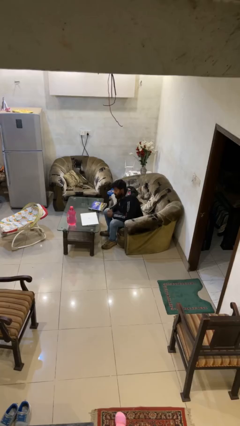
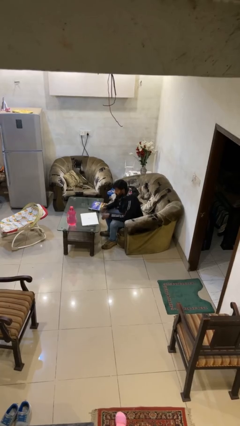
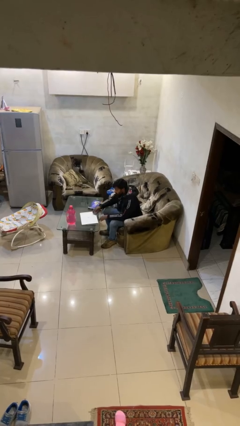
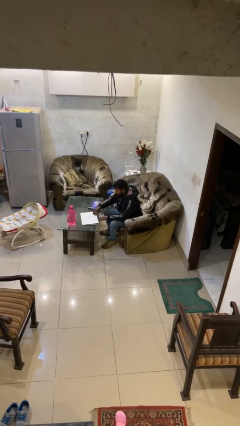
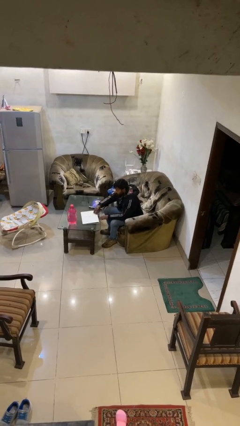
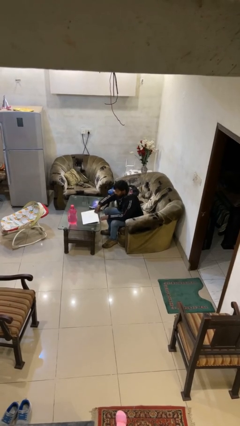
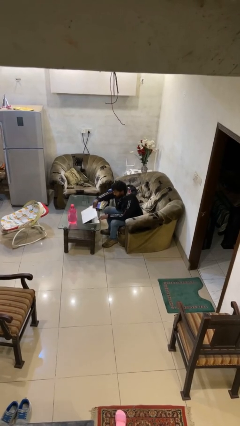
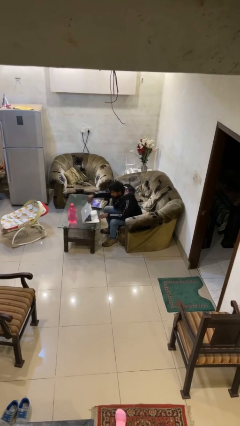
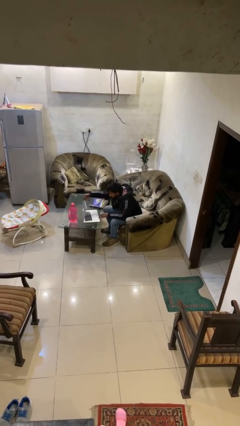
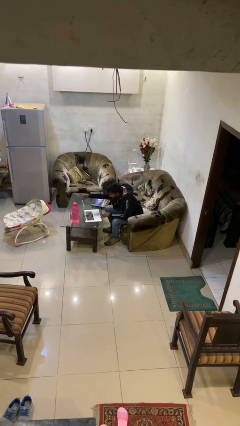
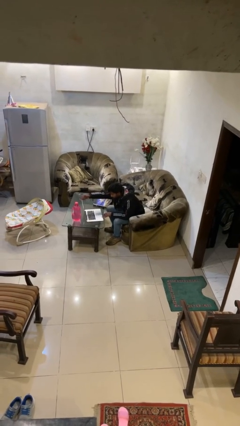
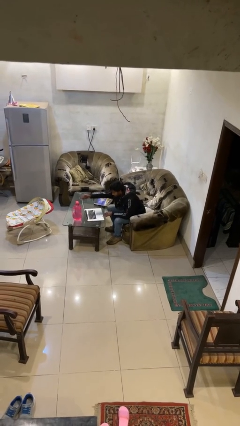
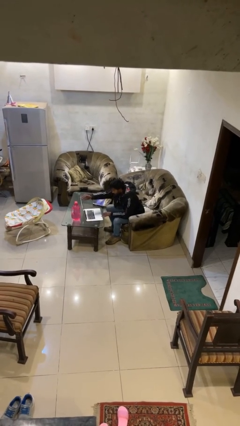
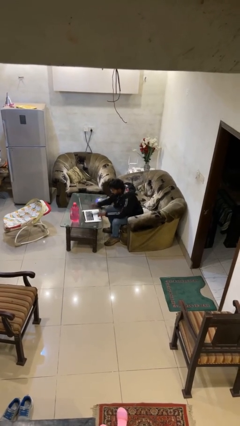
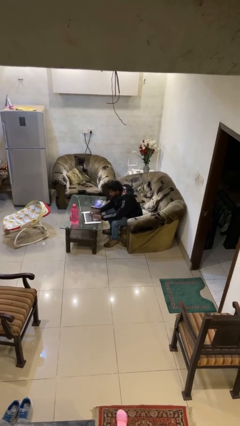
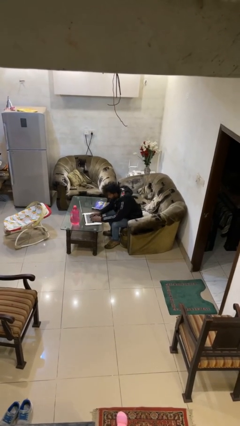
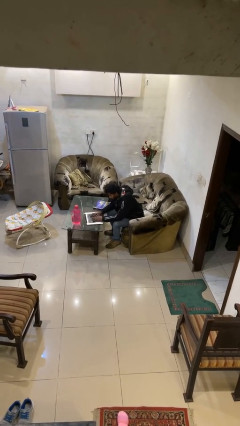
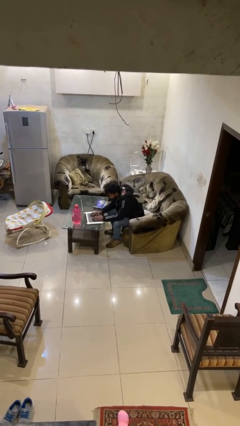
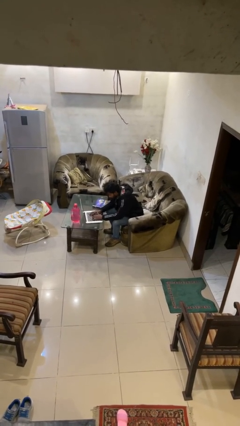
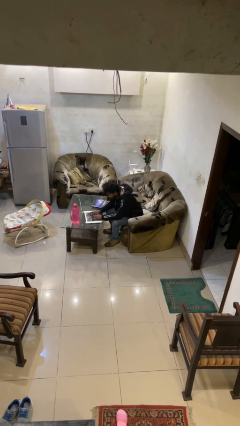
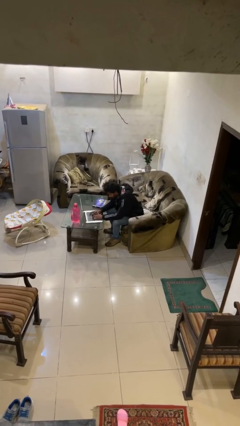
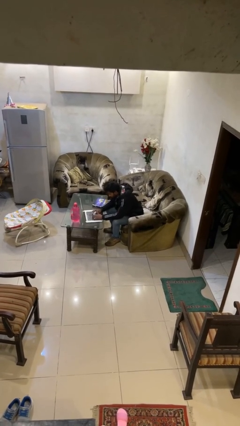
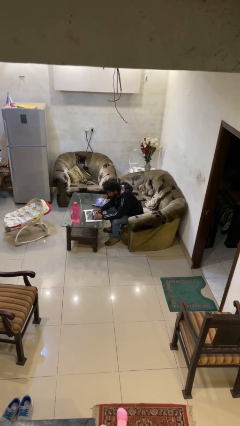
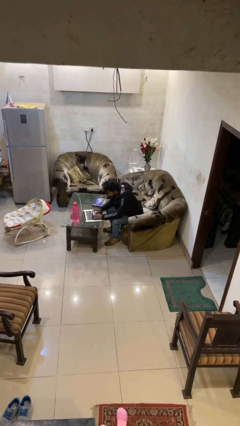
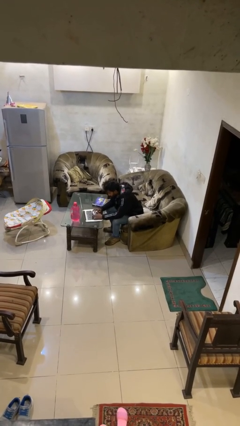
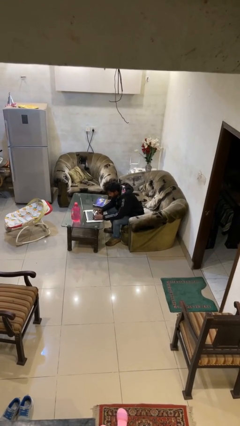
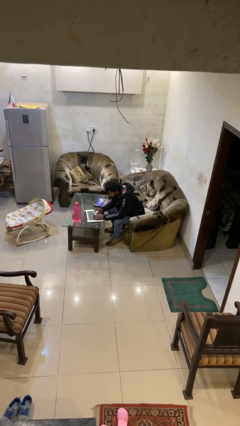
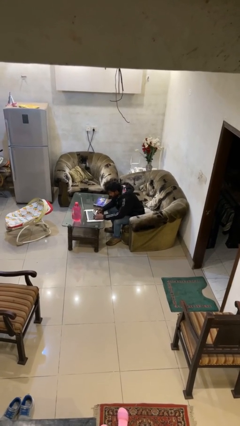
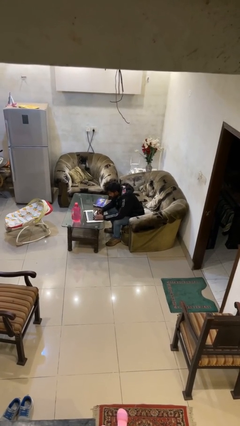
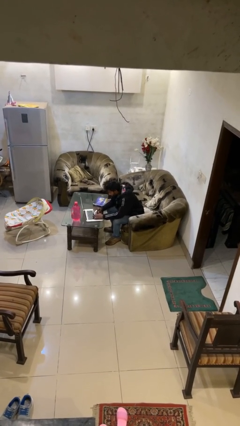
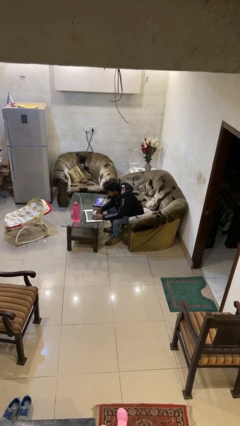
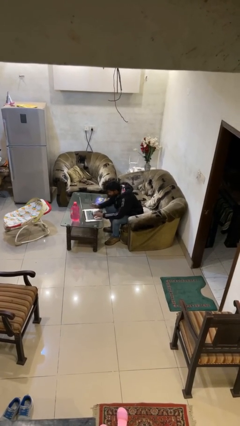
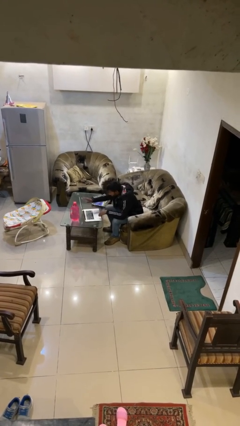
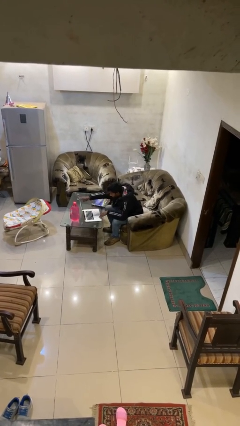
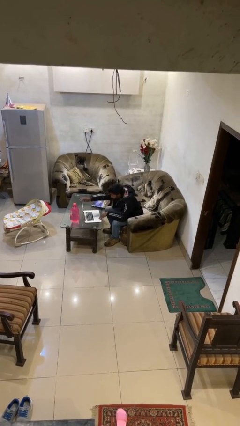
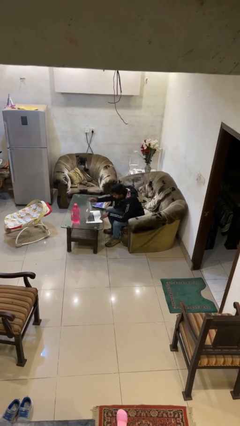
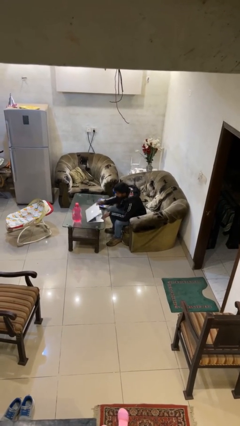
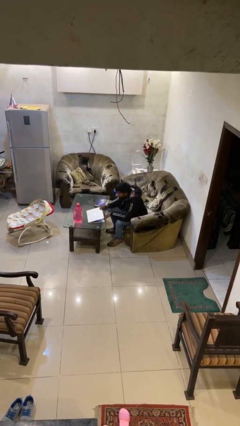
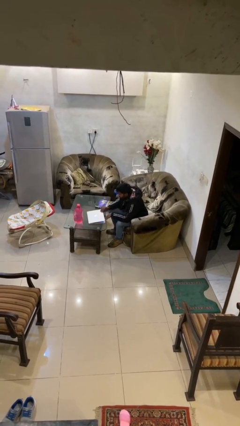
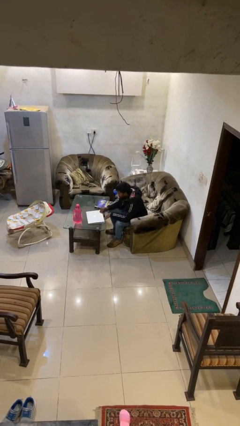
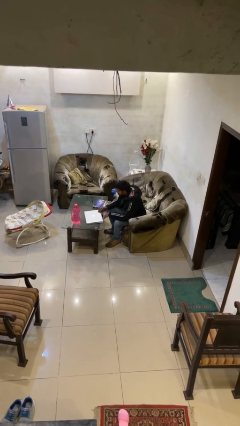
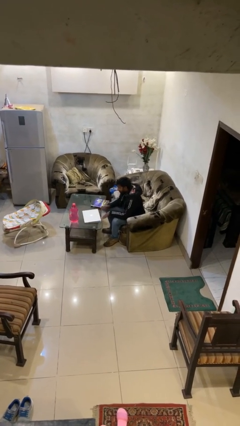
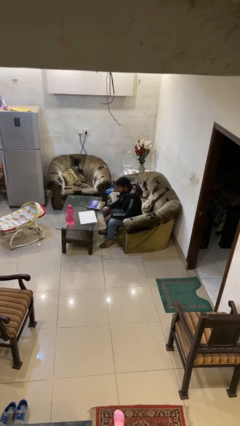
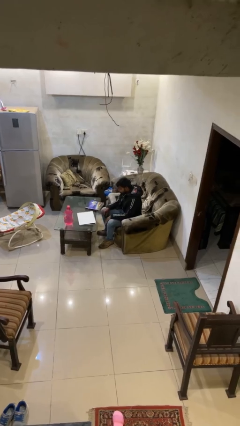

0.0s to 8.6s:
person interacts with laptop

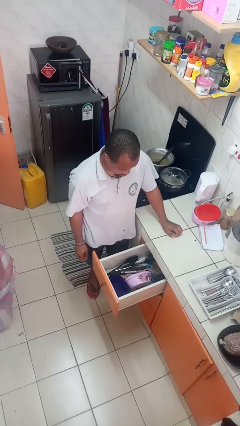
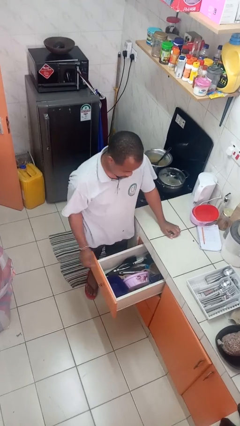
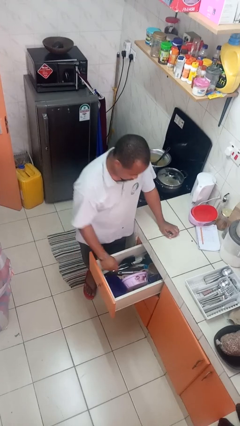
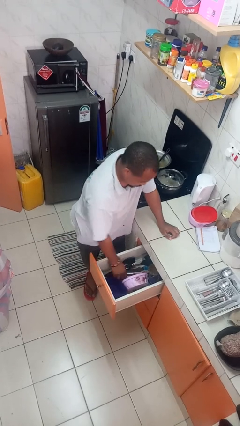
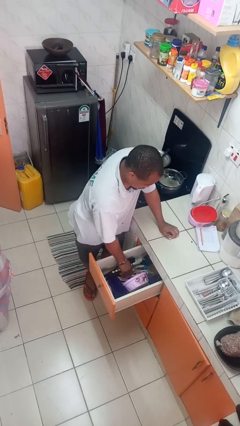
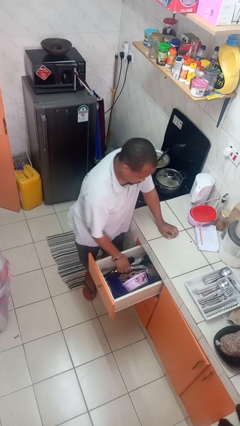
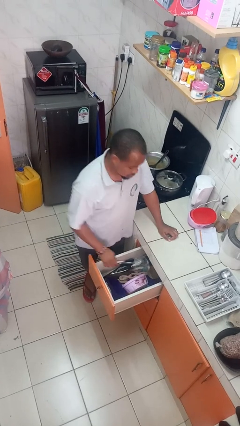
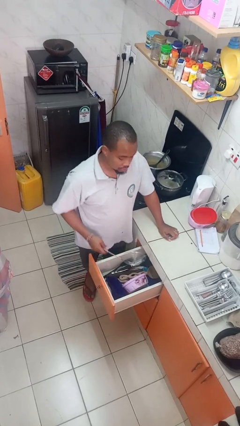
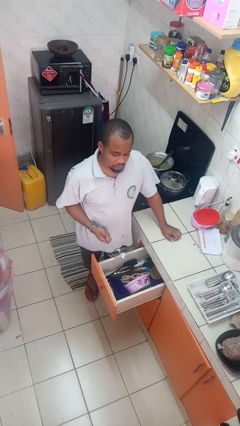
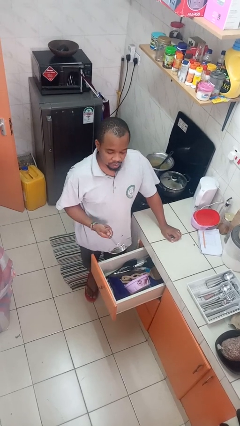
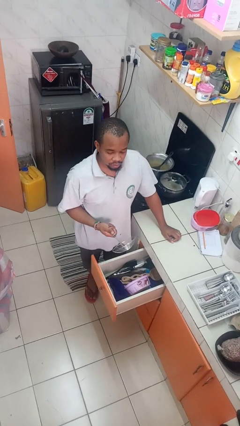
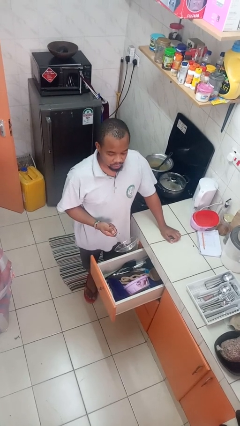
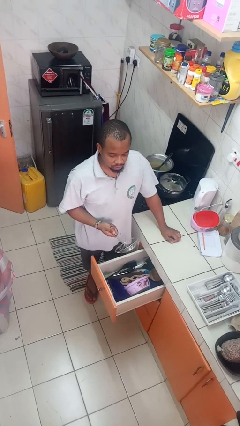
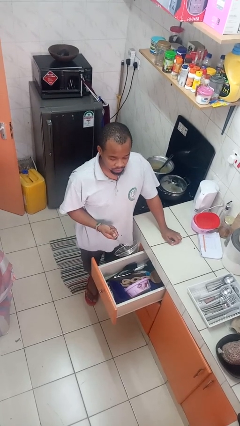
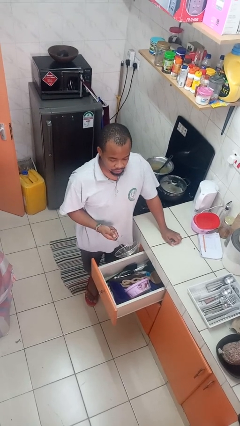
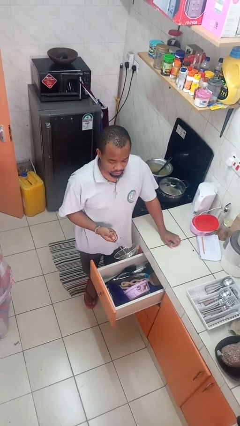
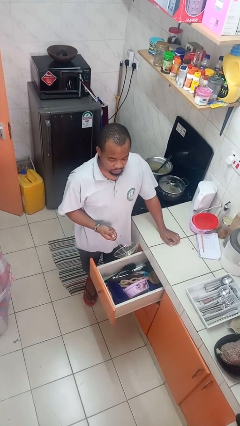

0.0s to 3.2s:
person takes object from kitchen drawer

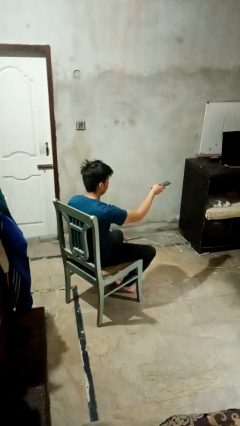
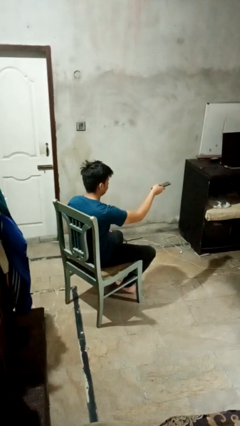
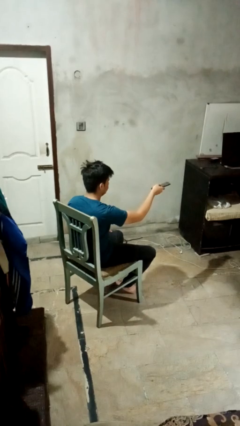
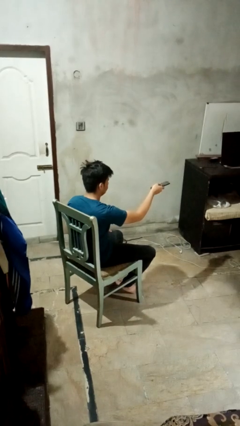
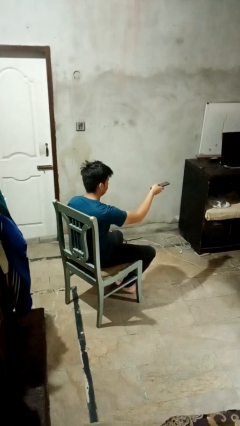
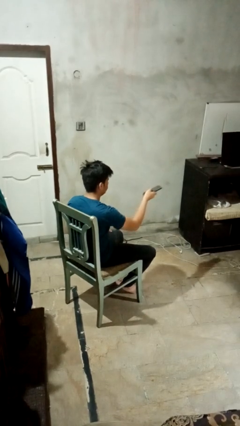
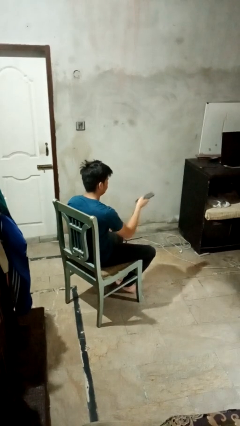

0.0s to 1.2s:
person uses television remote

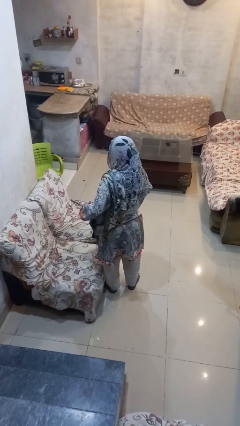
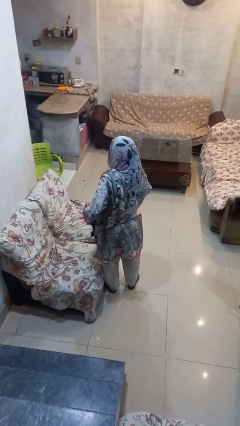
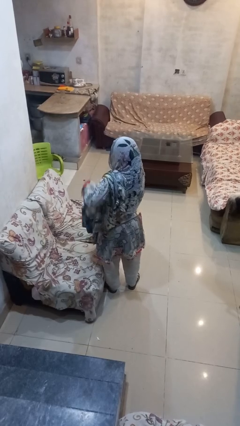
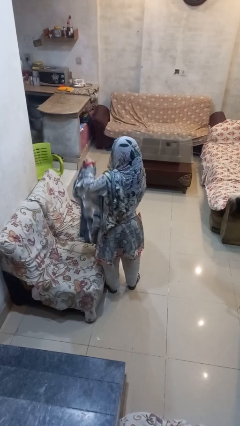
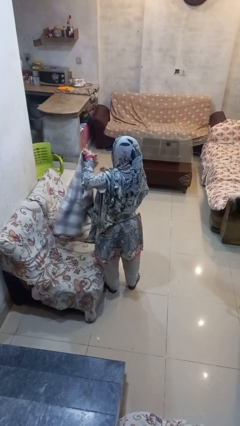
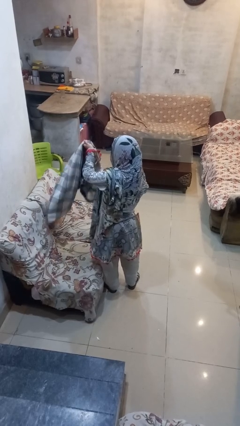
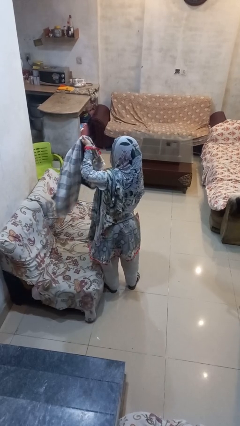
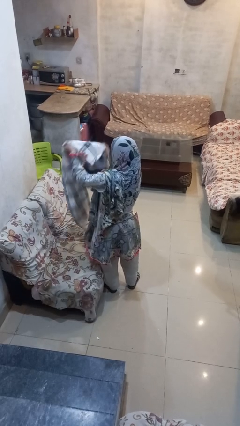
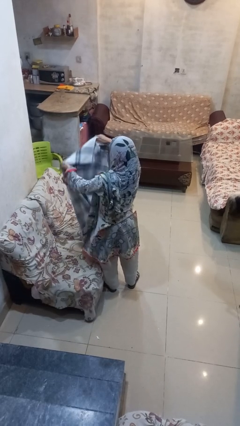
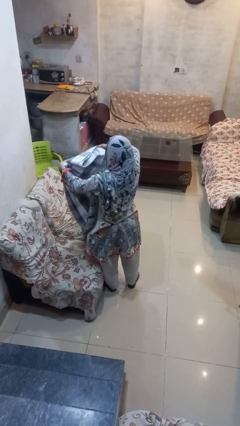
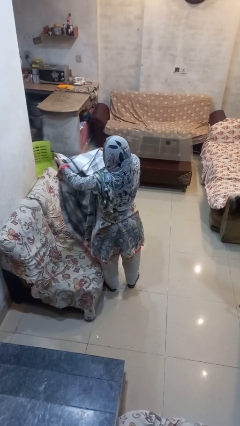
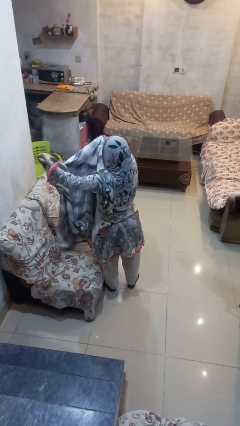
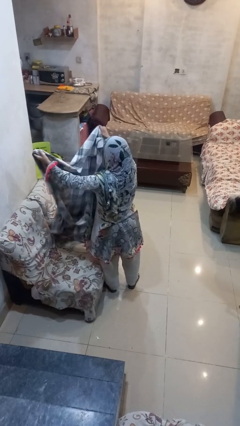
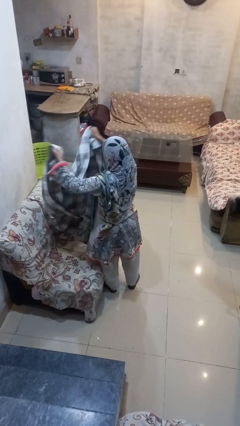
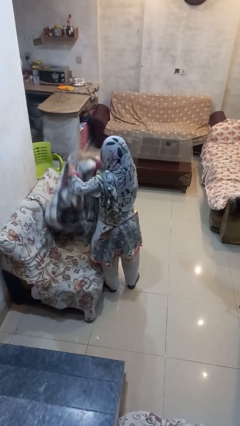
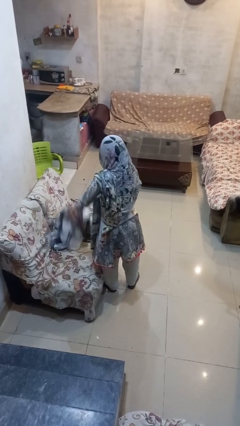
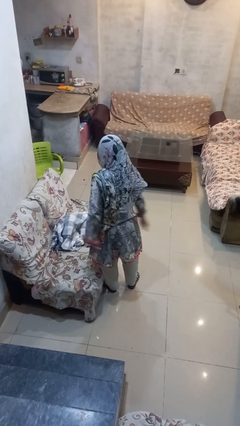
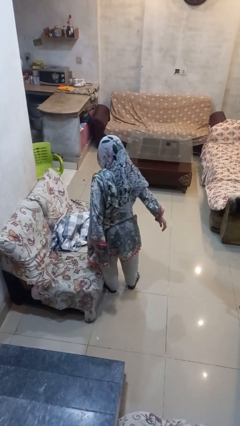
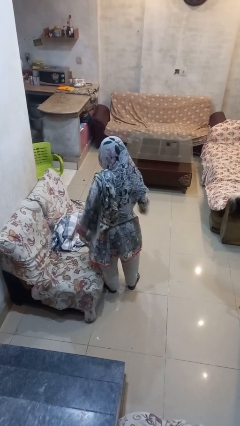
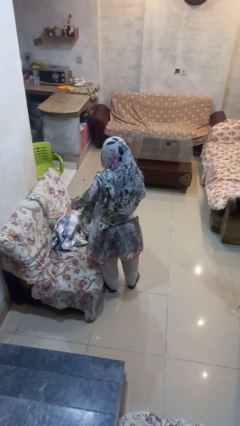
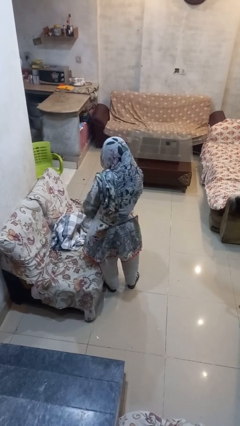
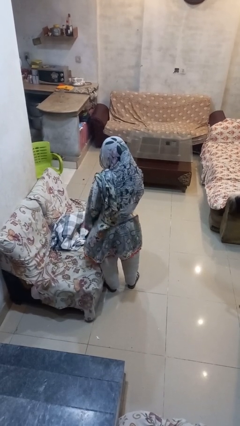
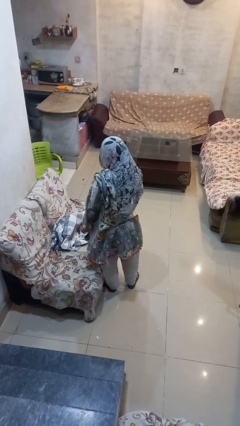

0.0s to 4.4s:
person unfolds blanket

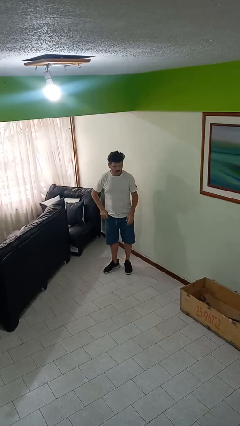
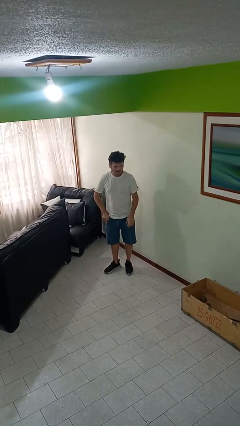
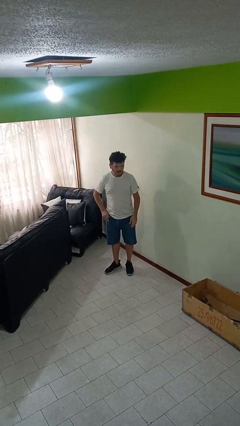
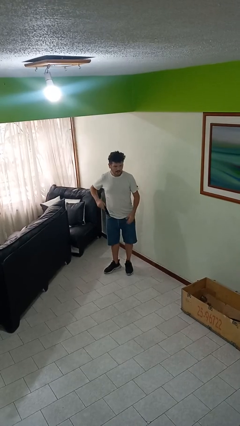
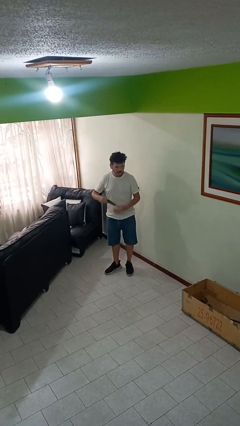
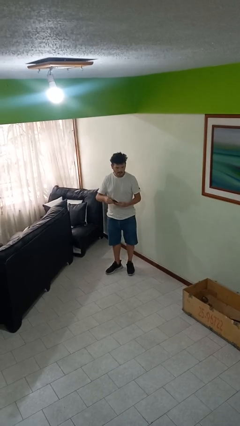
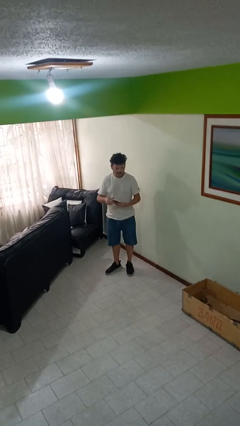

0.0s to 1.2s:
person takes phone from pocket
